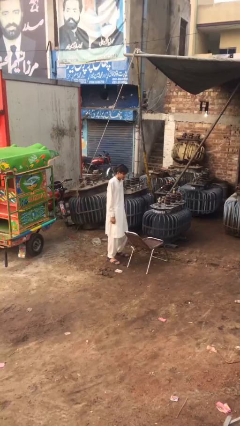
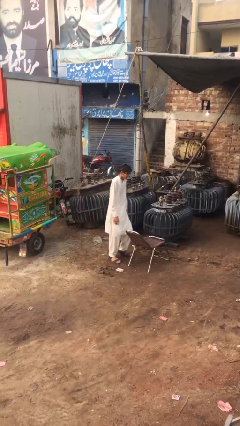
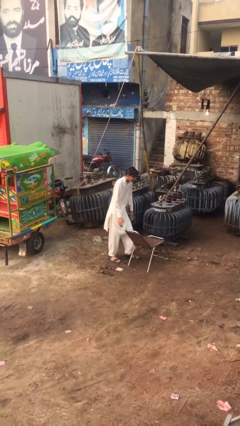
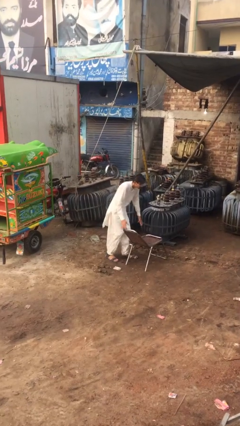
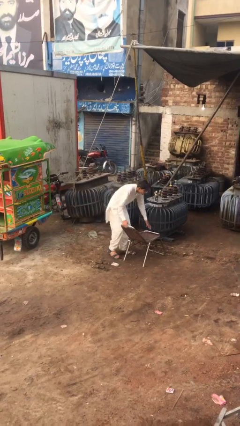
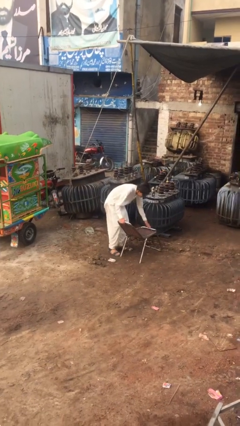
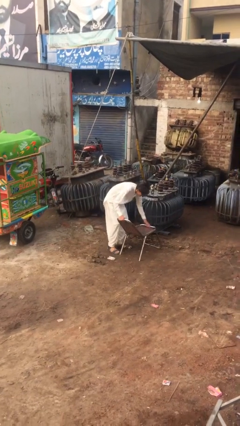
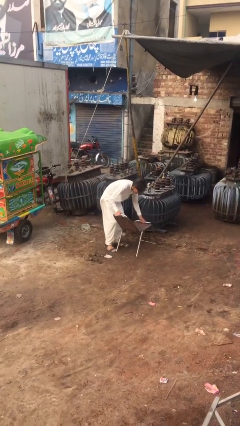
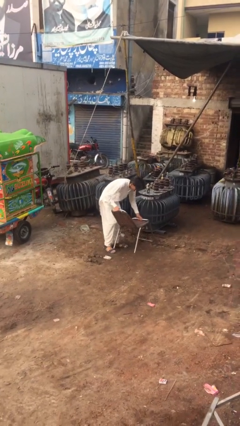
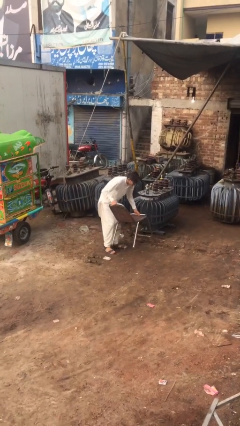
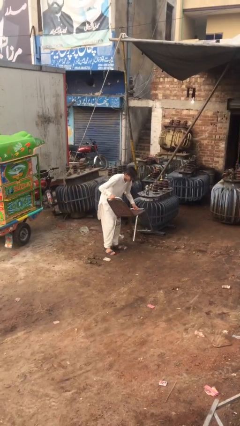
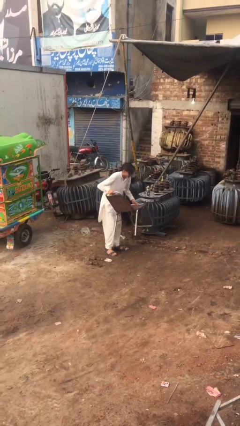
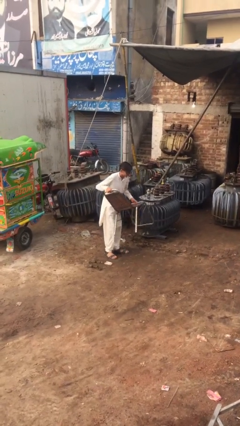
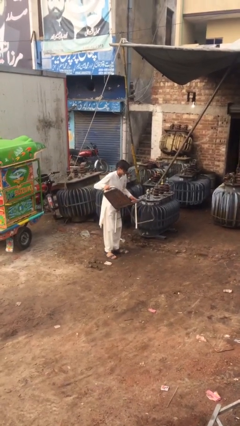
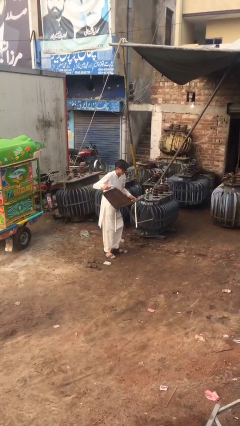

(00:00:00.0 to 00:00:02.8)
person picks up object from floor

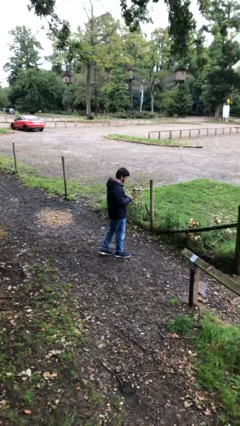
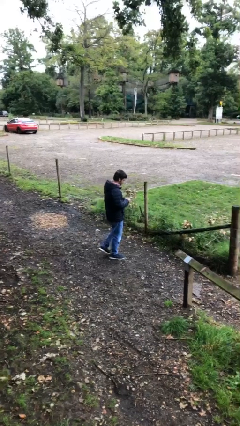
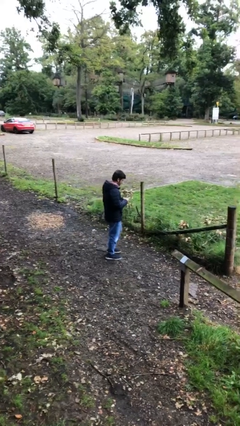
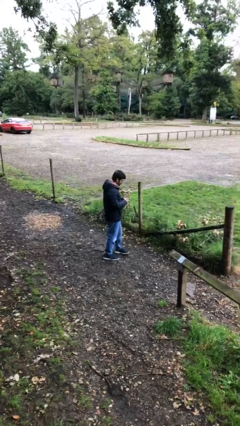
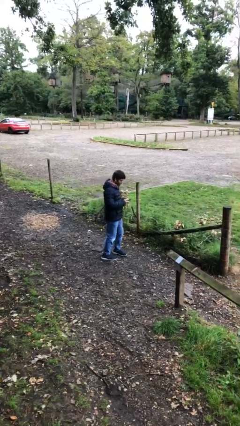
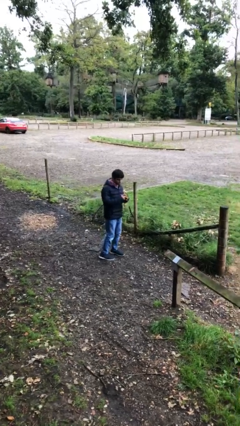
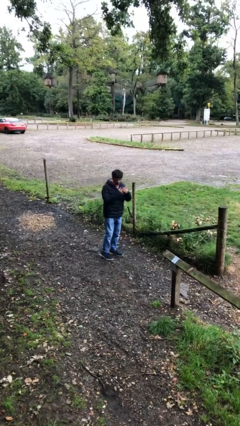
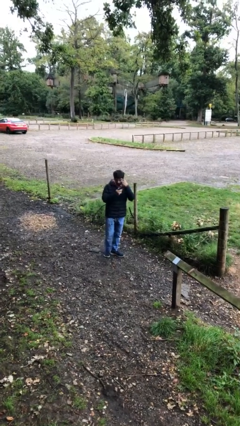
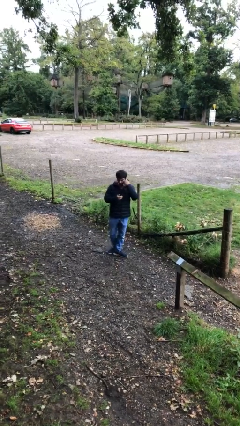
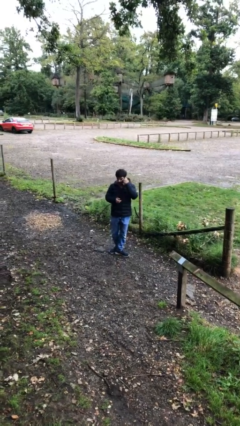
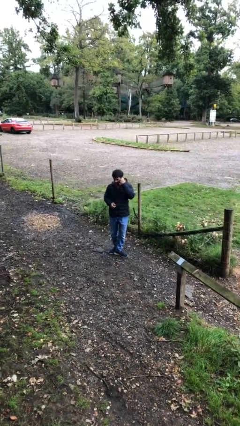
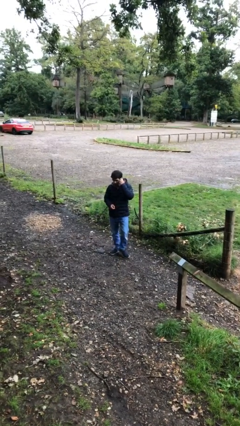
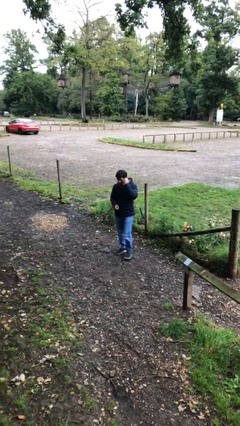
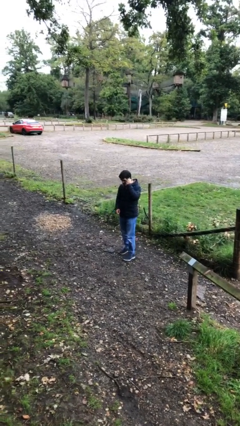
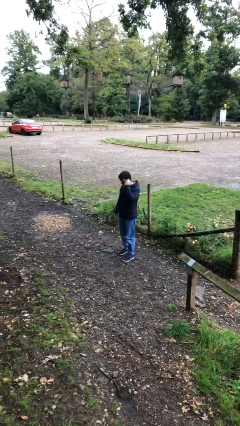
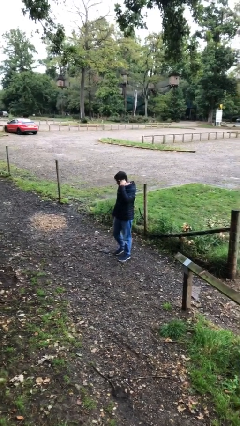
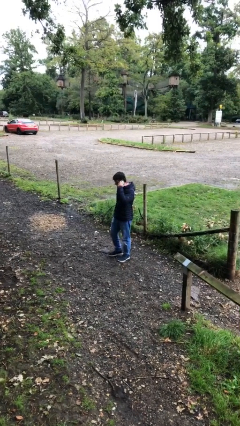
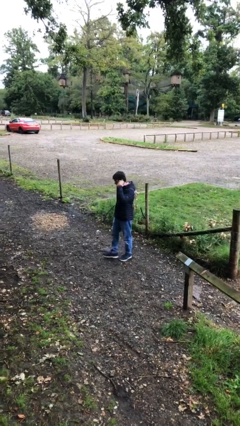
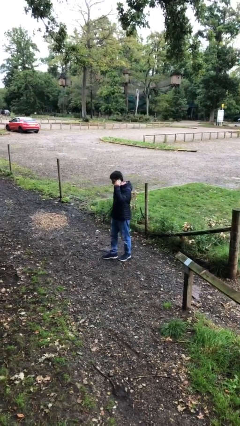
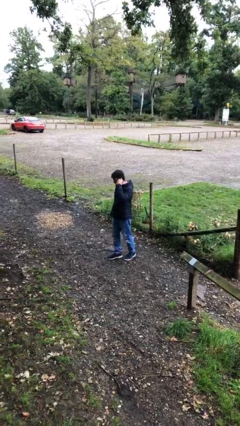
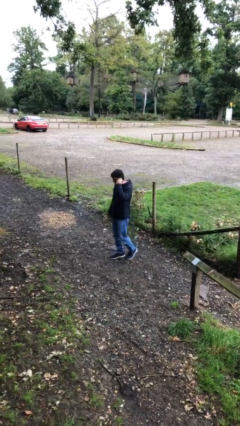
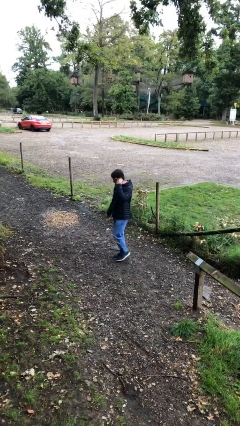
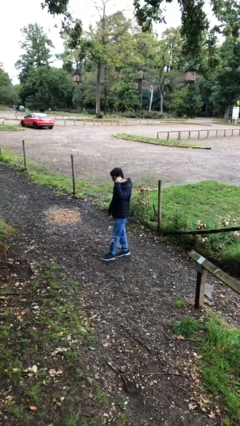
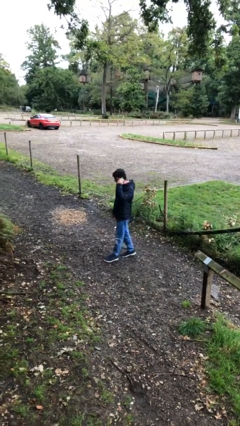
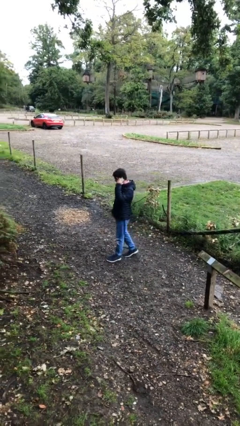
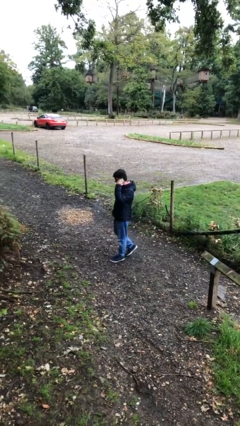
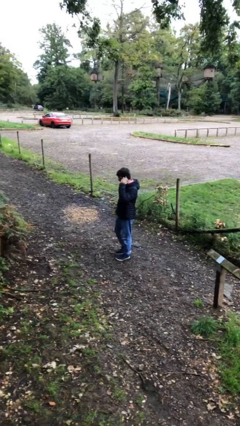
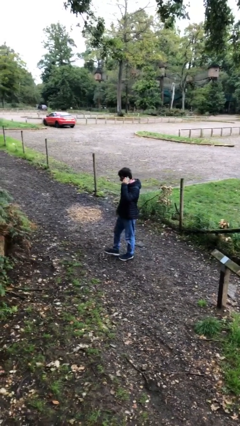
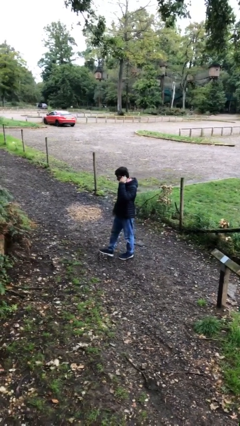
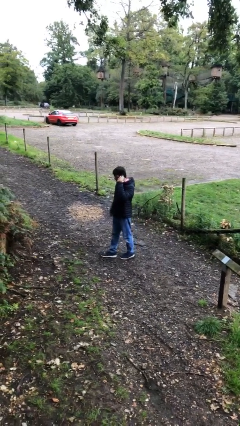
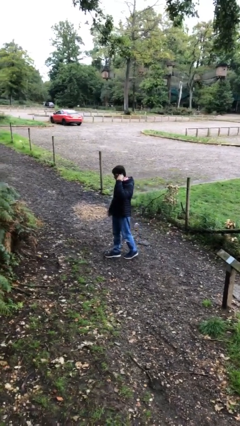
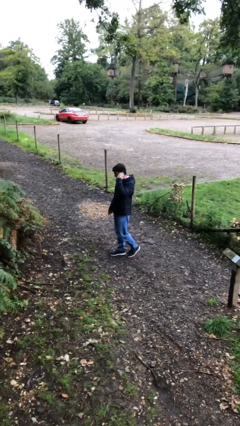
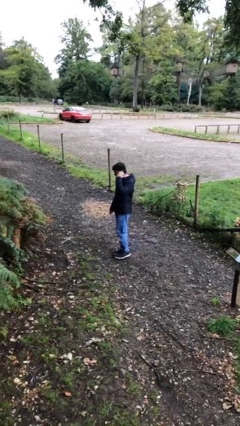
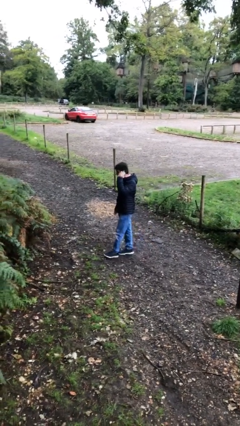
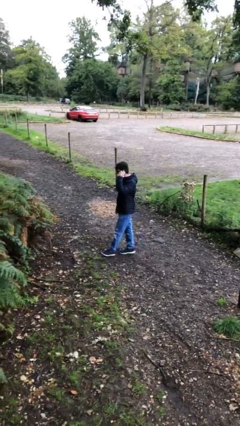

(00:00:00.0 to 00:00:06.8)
person talks on phone

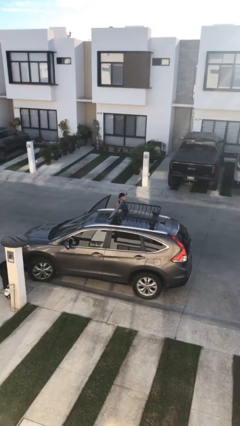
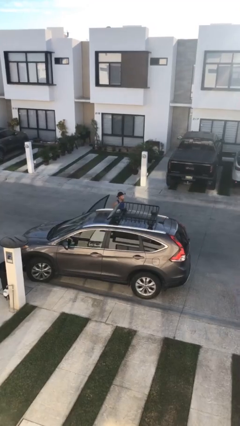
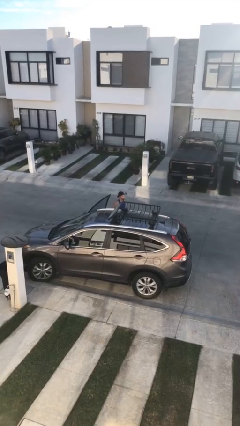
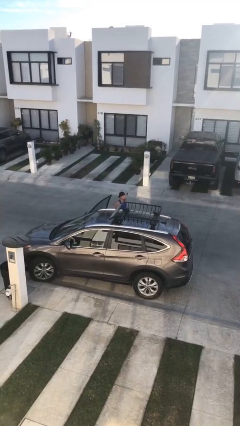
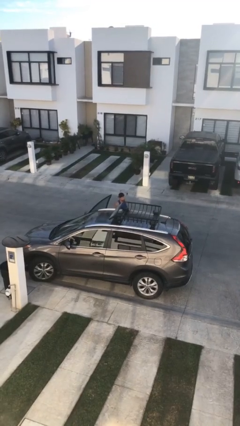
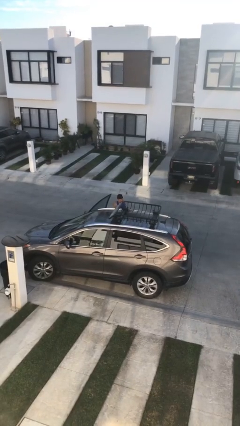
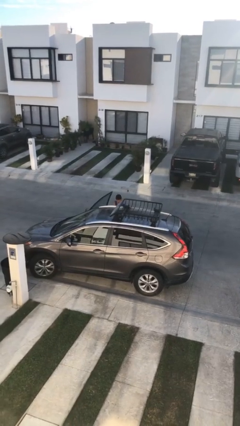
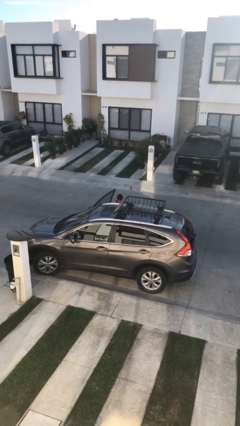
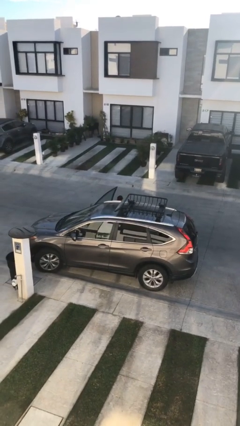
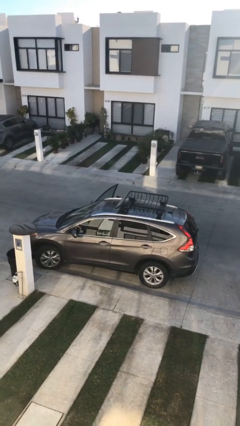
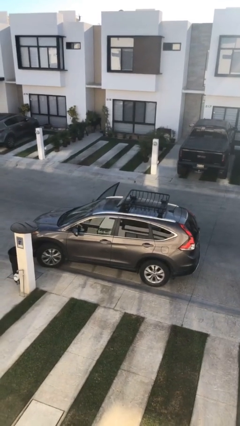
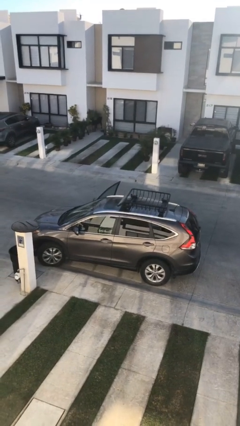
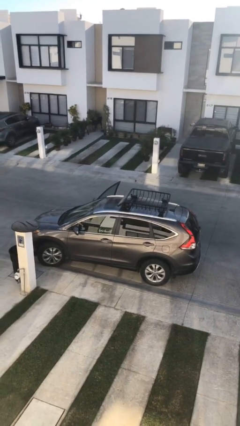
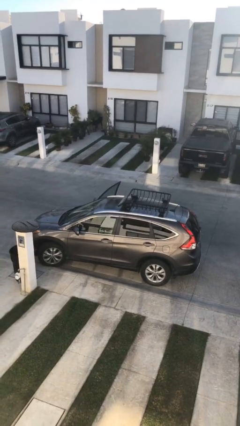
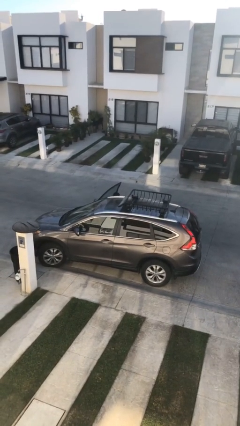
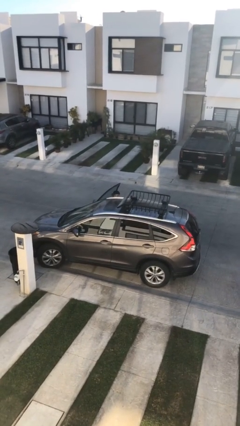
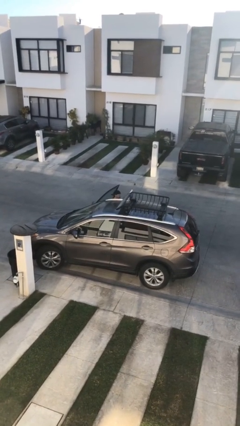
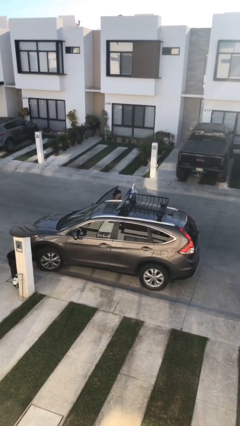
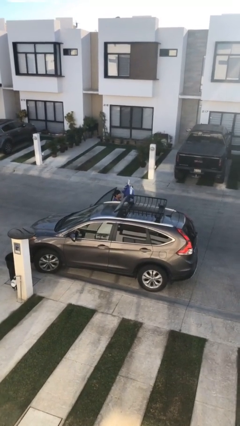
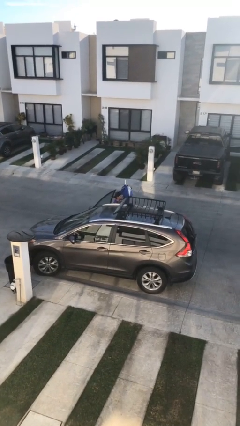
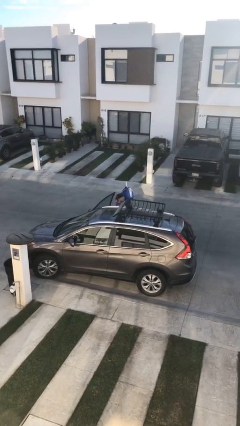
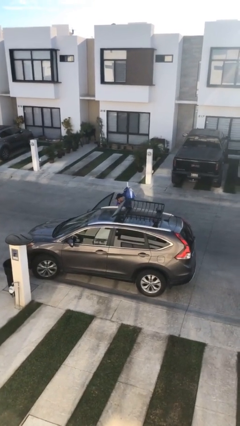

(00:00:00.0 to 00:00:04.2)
person unloads car

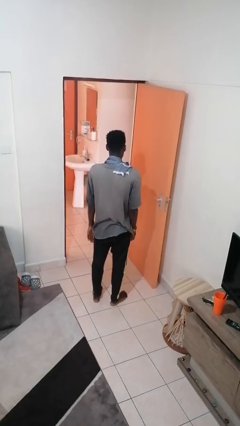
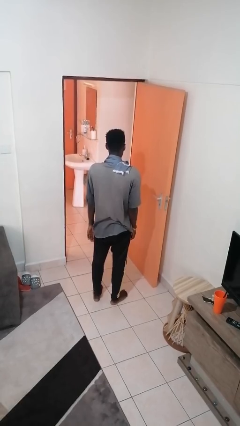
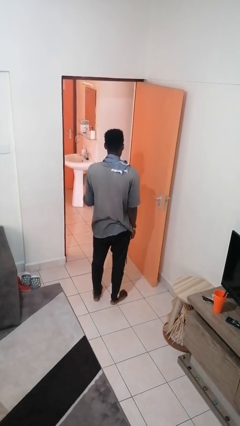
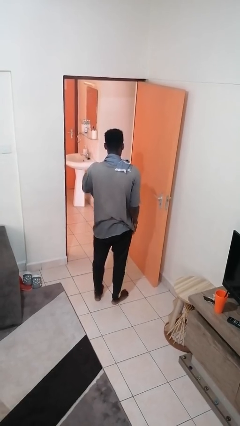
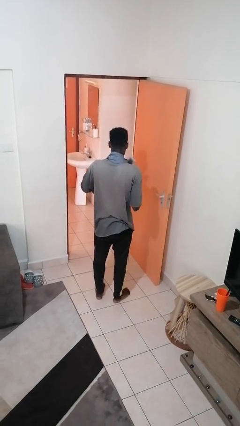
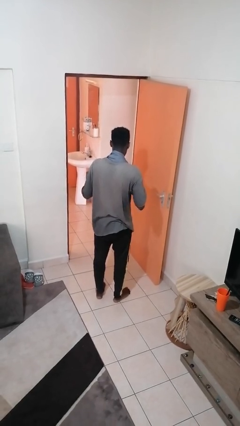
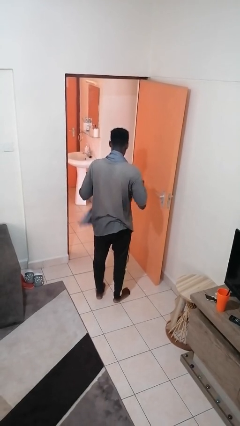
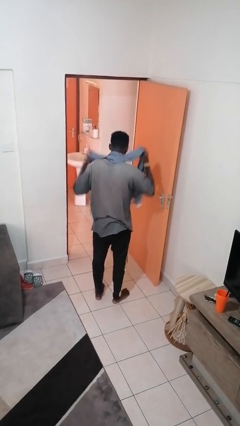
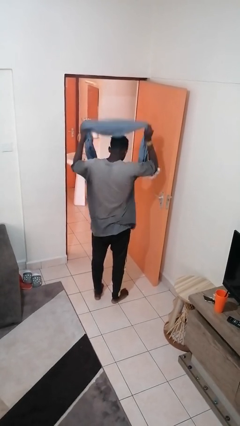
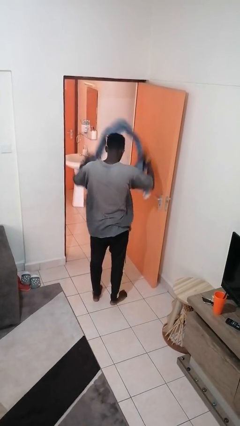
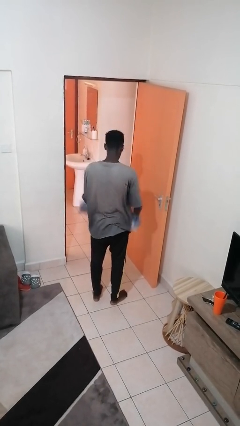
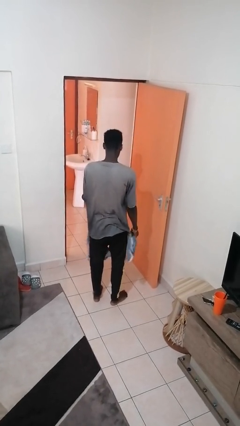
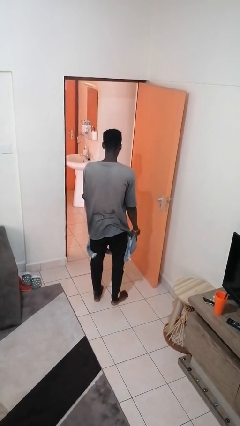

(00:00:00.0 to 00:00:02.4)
person takes off scarf

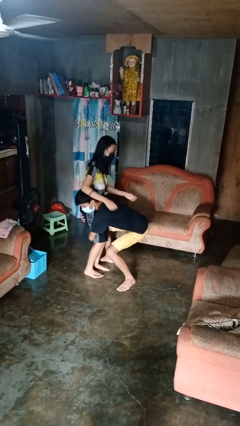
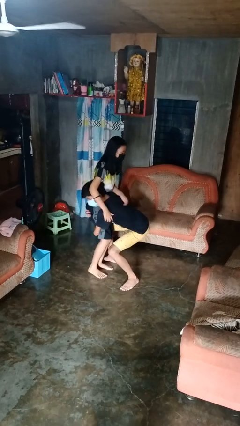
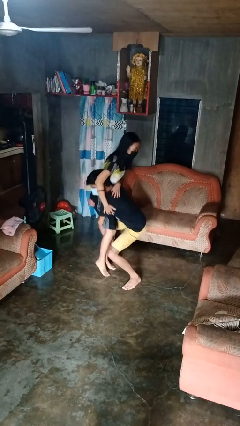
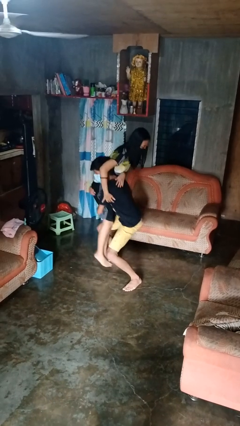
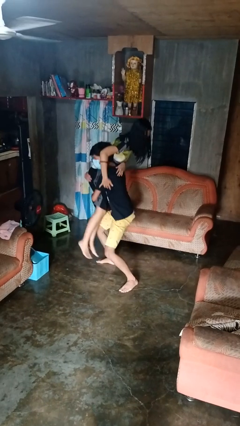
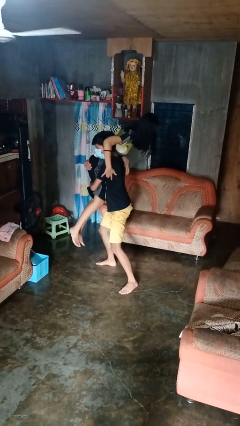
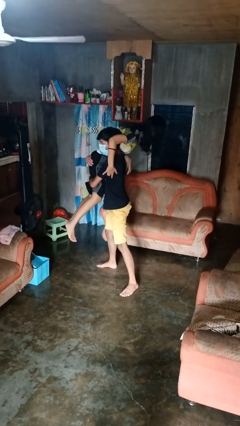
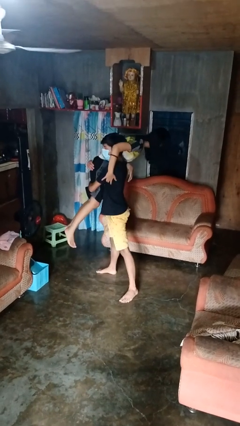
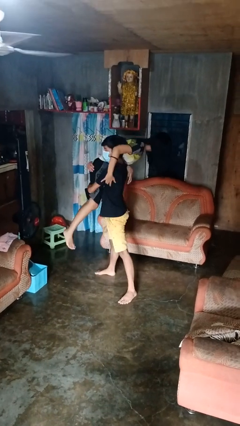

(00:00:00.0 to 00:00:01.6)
person carries person over shoulder
